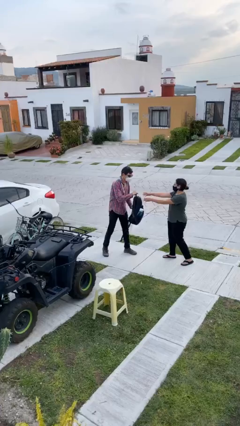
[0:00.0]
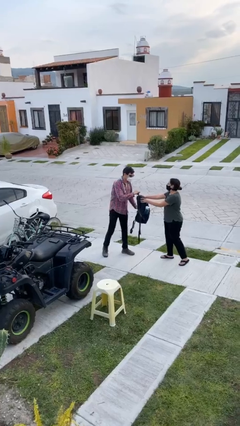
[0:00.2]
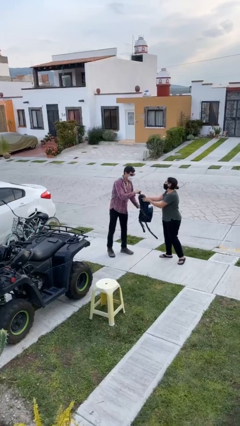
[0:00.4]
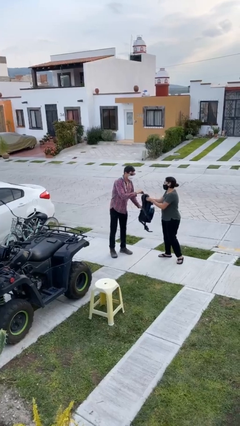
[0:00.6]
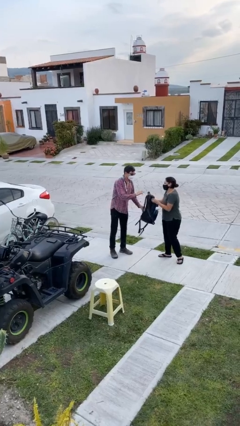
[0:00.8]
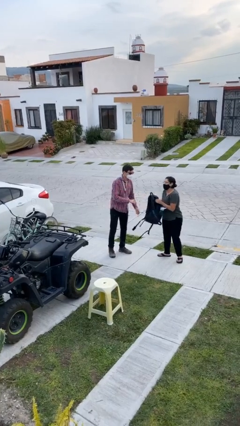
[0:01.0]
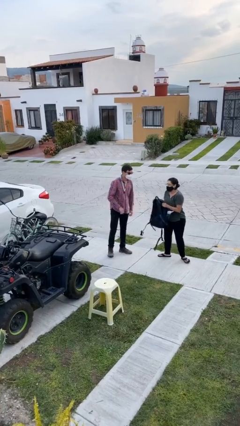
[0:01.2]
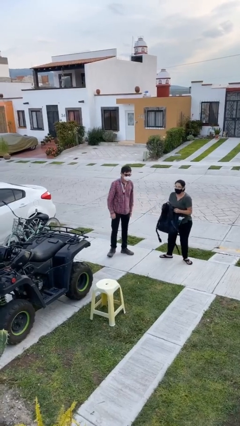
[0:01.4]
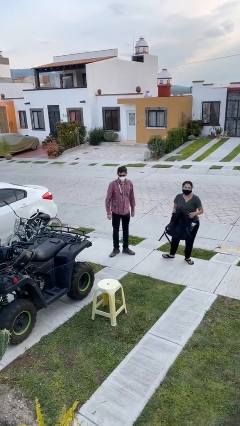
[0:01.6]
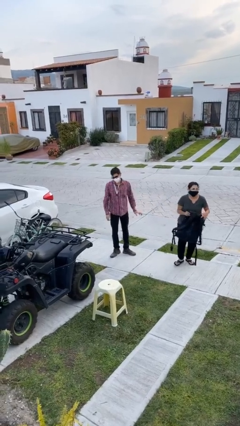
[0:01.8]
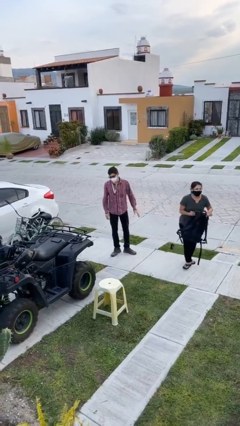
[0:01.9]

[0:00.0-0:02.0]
person transfers object to person

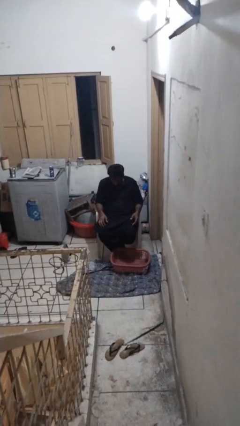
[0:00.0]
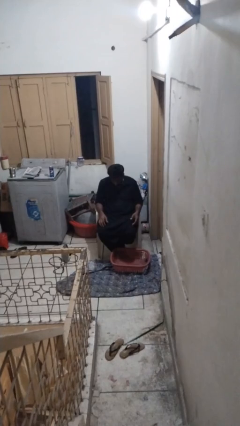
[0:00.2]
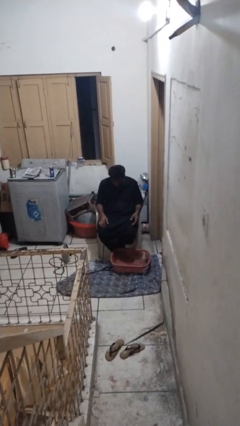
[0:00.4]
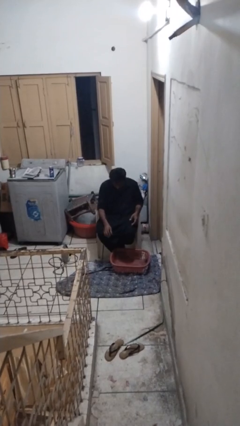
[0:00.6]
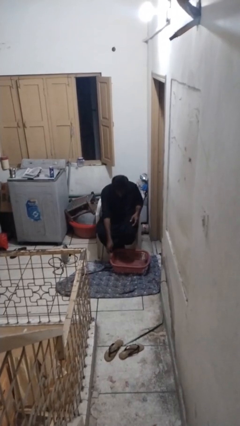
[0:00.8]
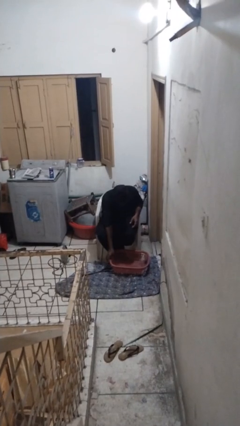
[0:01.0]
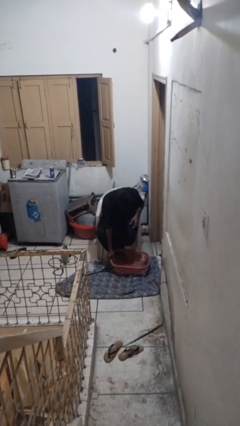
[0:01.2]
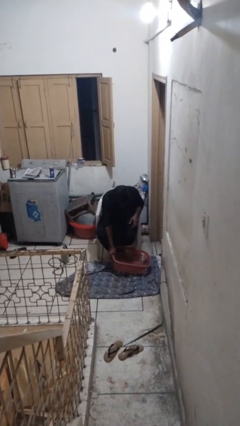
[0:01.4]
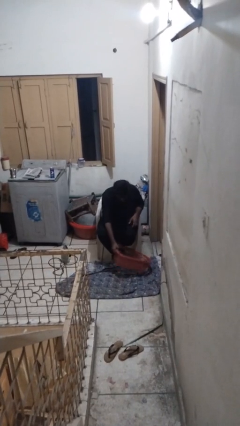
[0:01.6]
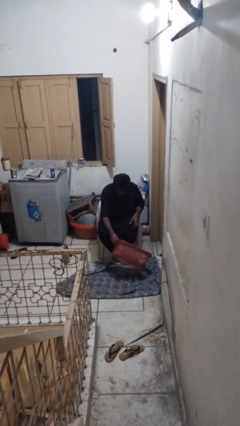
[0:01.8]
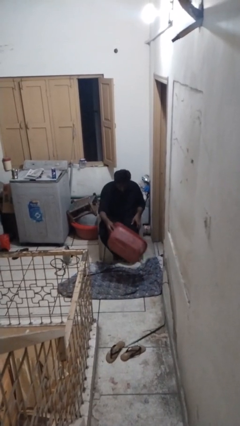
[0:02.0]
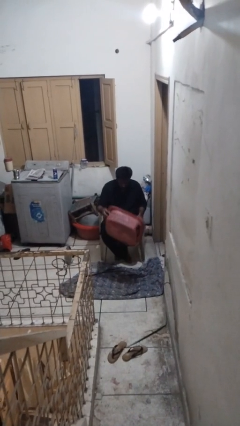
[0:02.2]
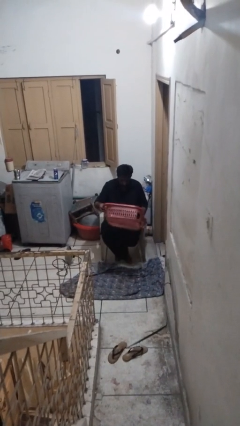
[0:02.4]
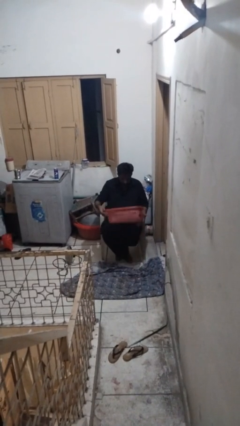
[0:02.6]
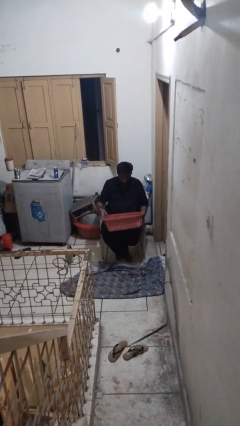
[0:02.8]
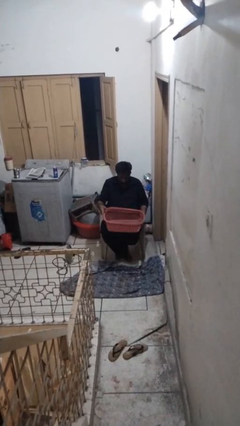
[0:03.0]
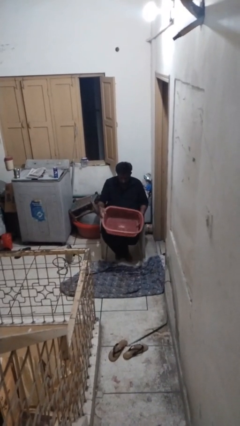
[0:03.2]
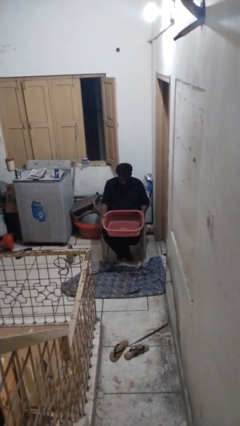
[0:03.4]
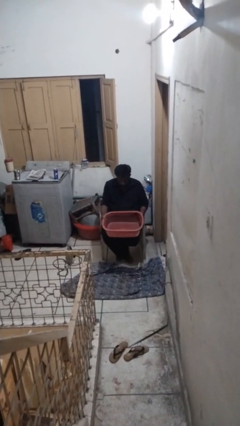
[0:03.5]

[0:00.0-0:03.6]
person picks up object from floor

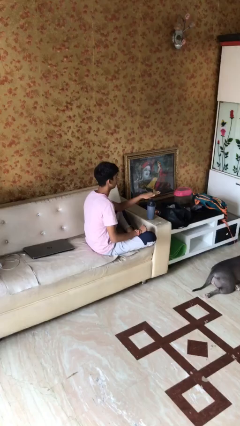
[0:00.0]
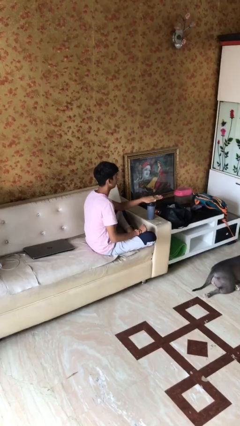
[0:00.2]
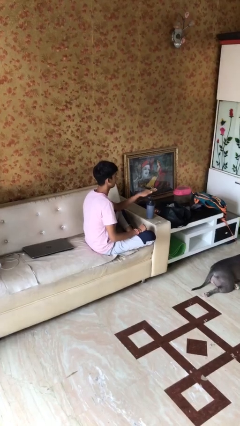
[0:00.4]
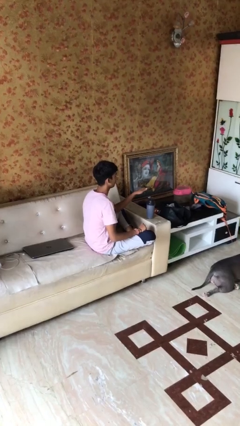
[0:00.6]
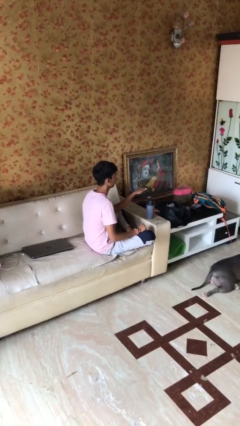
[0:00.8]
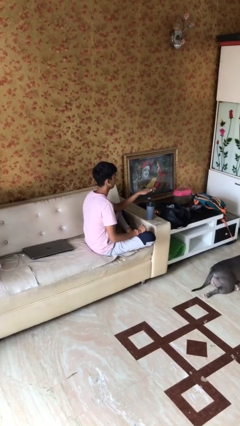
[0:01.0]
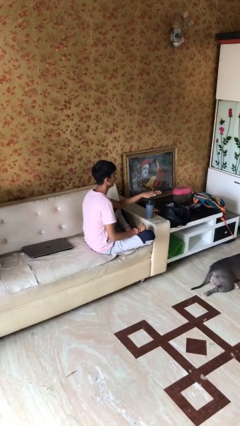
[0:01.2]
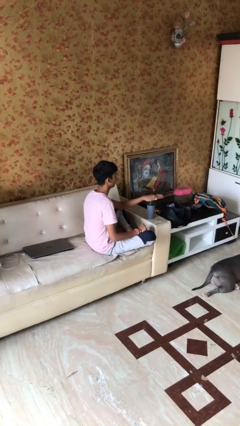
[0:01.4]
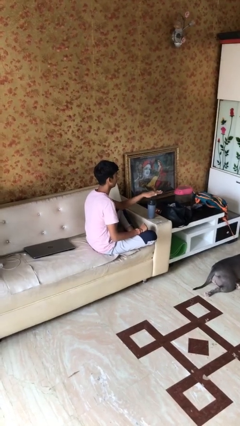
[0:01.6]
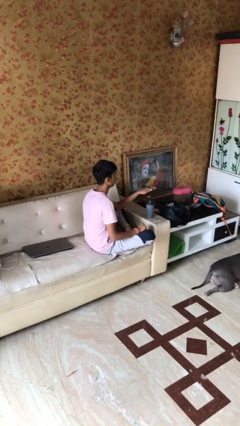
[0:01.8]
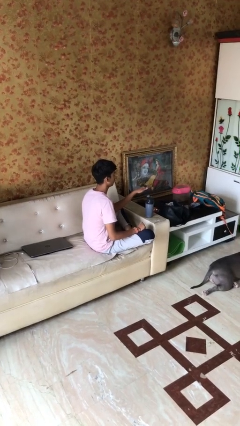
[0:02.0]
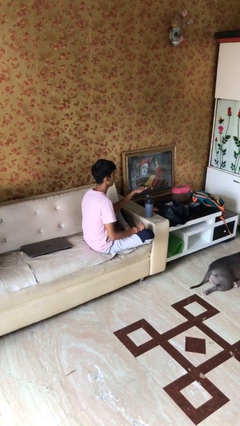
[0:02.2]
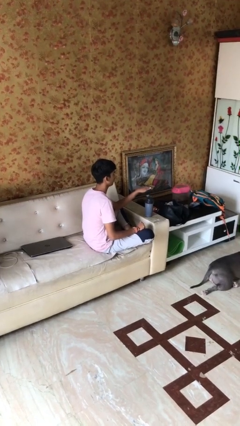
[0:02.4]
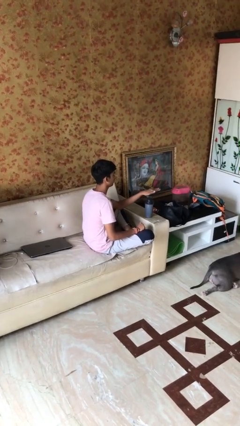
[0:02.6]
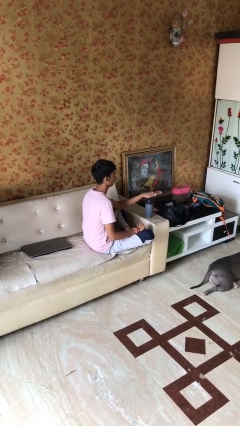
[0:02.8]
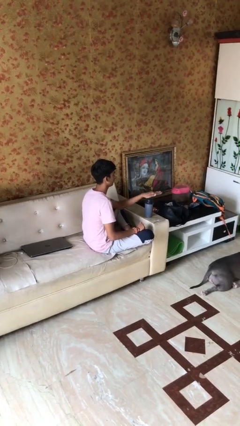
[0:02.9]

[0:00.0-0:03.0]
person waves hand over object

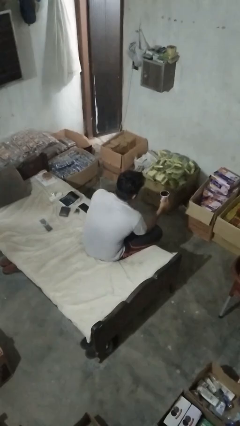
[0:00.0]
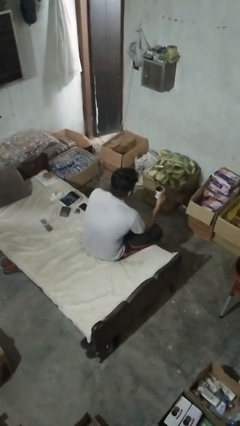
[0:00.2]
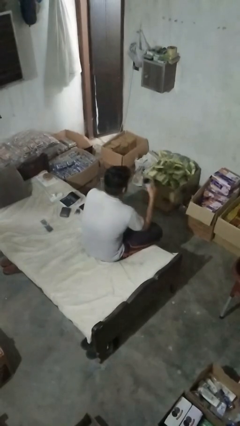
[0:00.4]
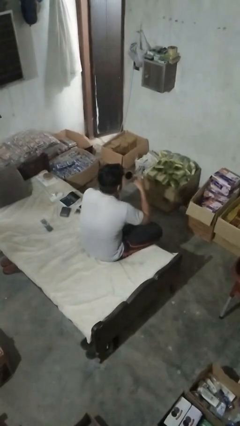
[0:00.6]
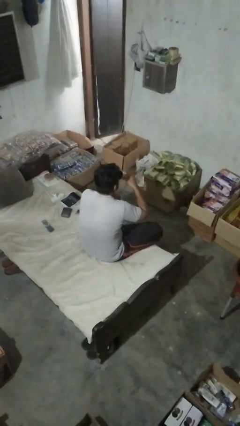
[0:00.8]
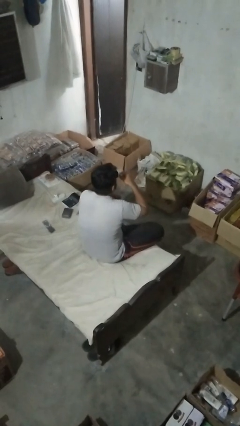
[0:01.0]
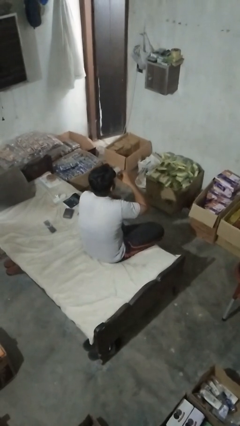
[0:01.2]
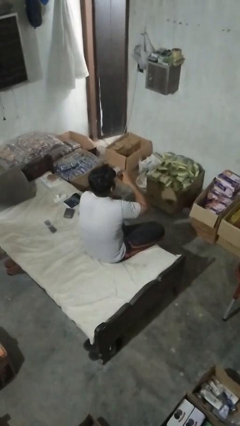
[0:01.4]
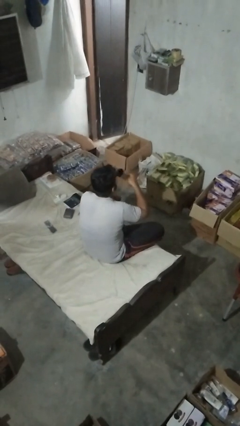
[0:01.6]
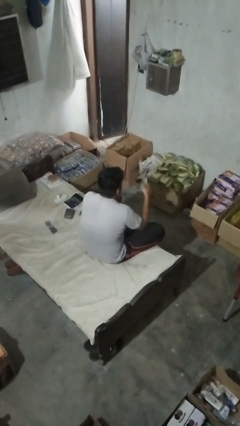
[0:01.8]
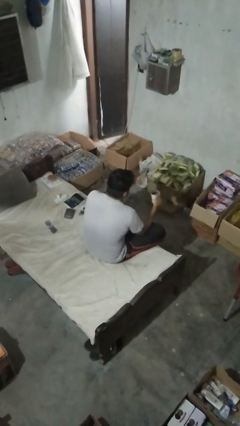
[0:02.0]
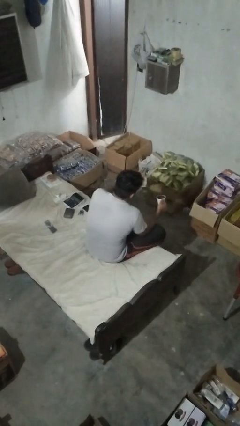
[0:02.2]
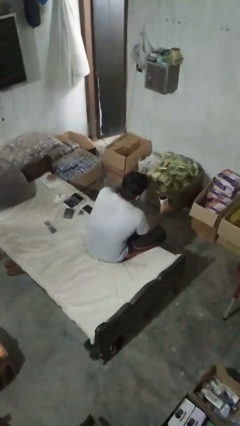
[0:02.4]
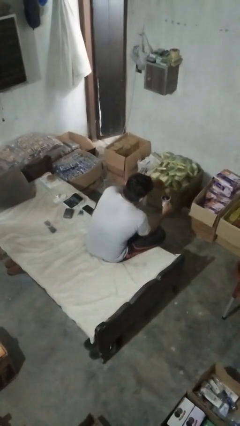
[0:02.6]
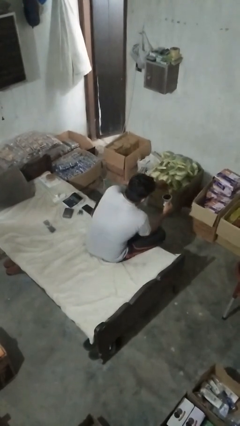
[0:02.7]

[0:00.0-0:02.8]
person drinks from mug

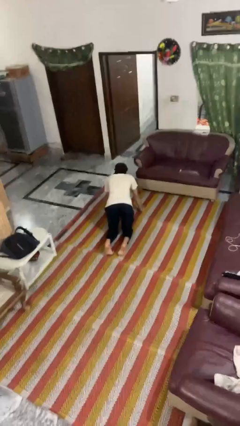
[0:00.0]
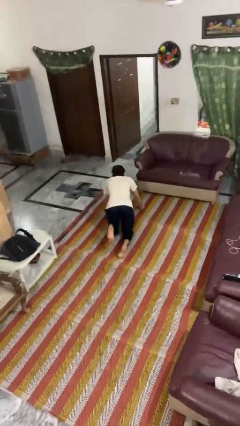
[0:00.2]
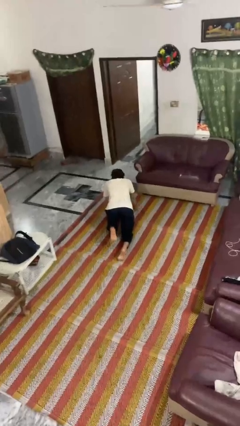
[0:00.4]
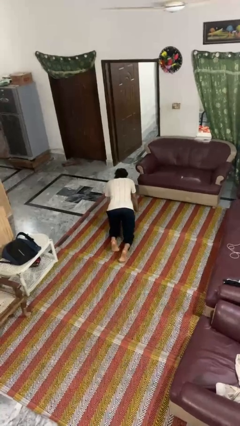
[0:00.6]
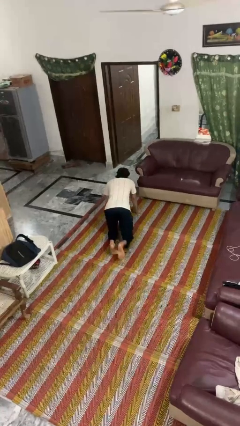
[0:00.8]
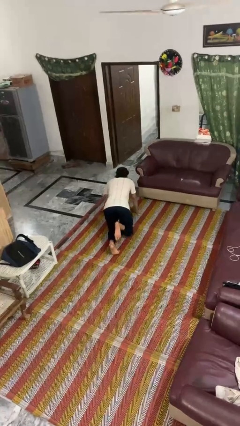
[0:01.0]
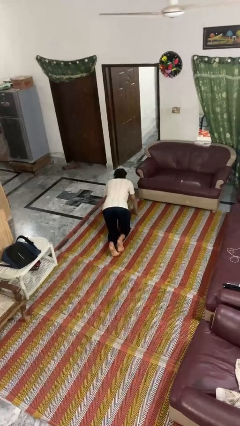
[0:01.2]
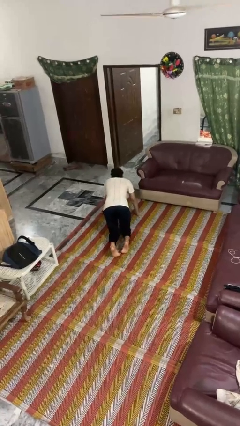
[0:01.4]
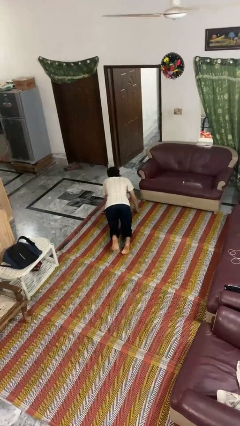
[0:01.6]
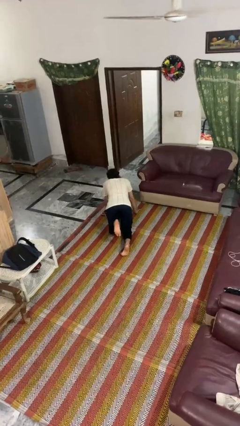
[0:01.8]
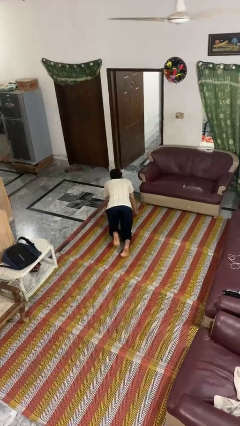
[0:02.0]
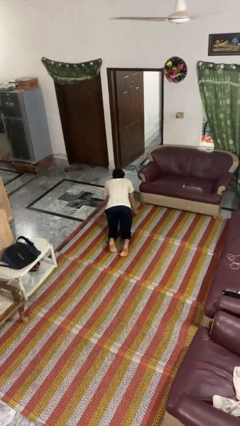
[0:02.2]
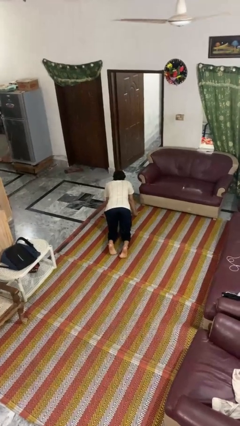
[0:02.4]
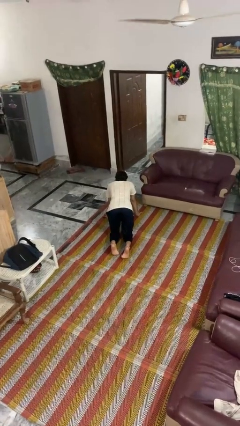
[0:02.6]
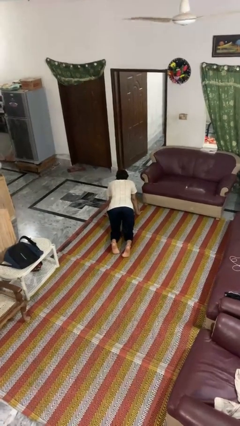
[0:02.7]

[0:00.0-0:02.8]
person crawls

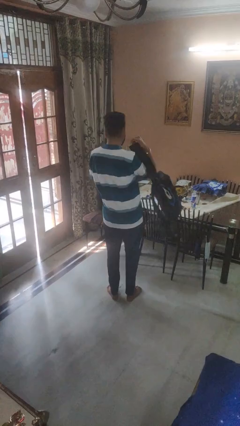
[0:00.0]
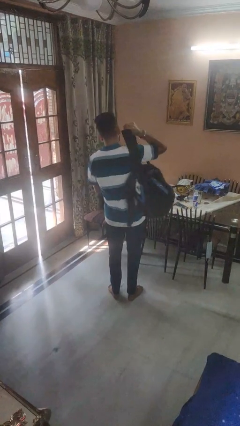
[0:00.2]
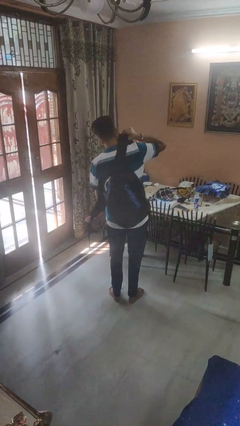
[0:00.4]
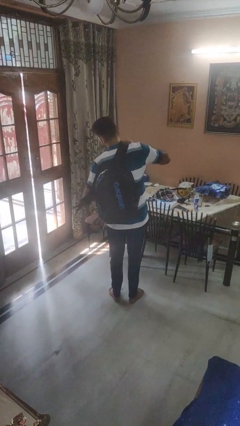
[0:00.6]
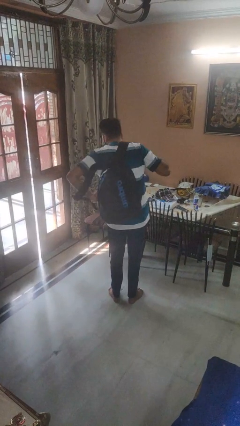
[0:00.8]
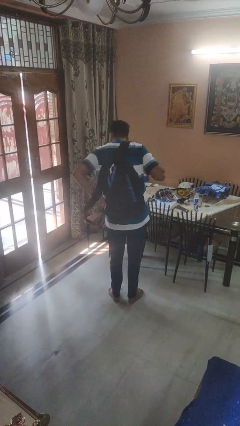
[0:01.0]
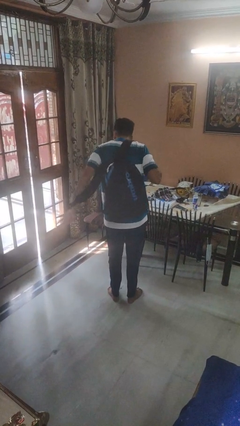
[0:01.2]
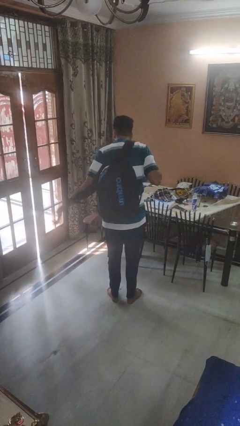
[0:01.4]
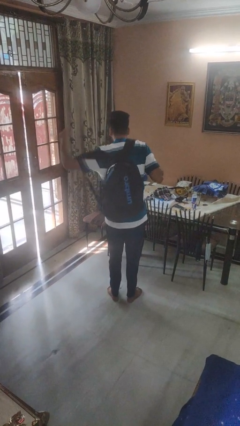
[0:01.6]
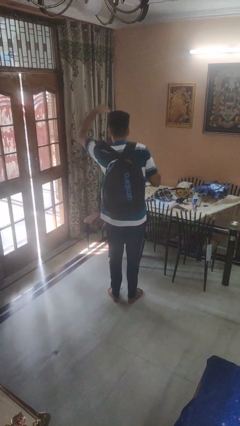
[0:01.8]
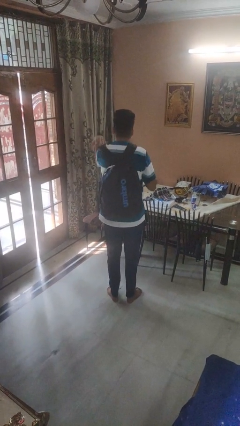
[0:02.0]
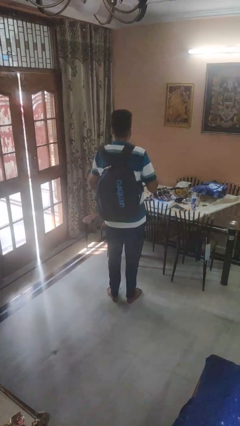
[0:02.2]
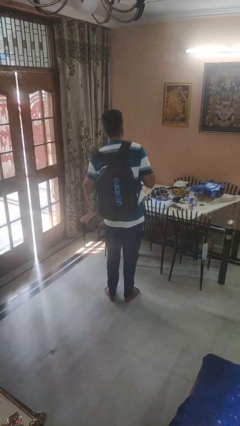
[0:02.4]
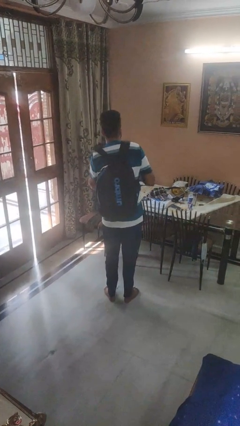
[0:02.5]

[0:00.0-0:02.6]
person puts on backpack

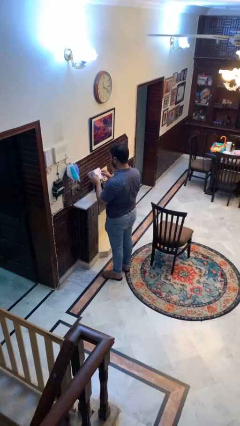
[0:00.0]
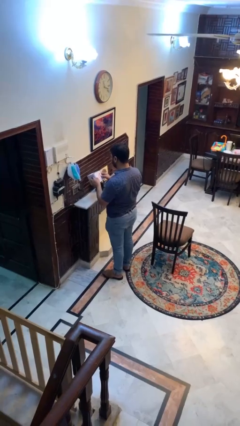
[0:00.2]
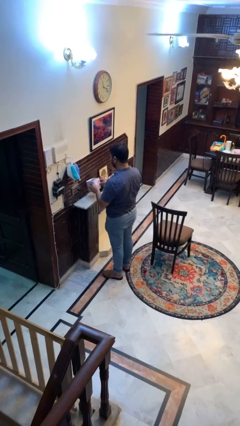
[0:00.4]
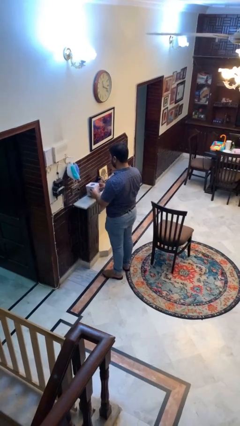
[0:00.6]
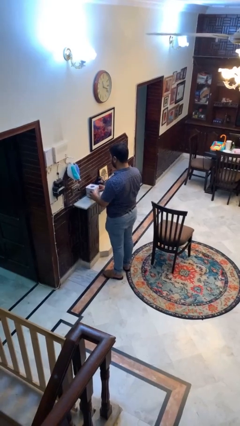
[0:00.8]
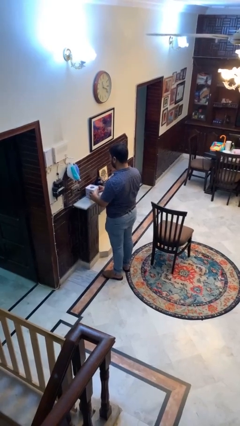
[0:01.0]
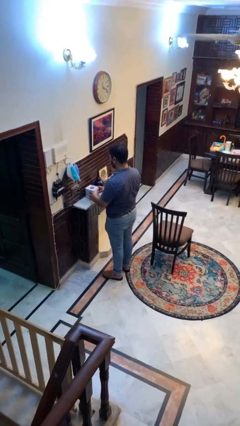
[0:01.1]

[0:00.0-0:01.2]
person puts down object on countertop
